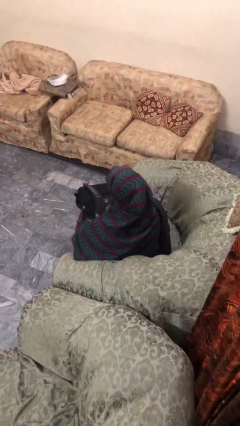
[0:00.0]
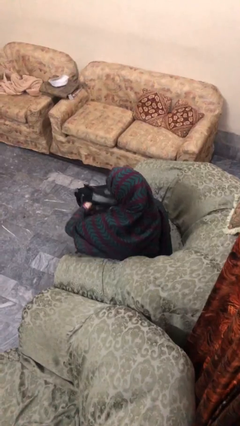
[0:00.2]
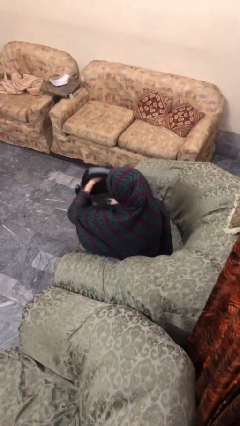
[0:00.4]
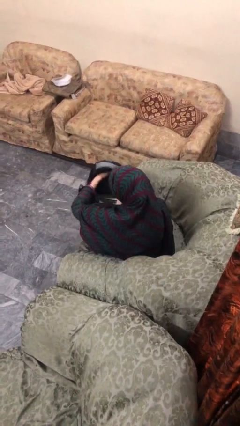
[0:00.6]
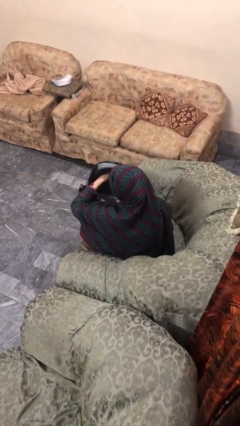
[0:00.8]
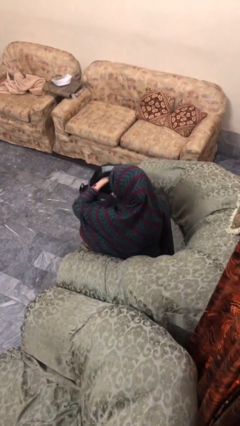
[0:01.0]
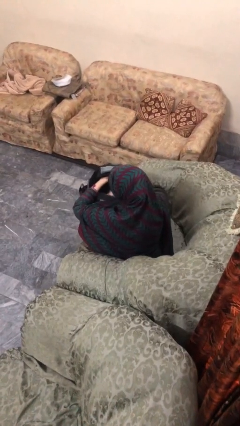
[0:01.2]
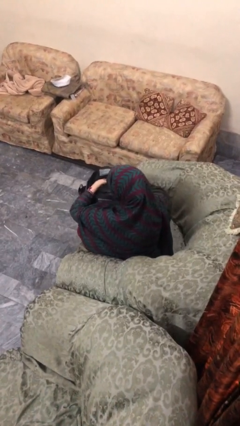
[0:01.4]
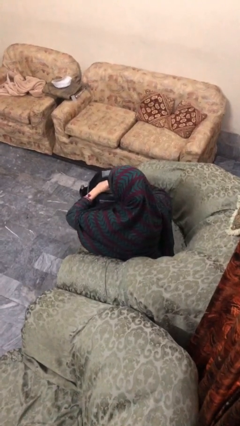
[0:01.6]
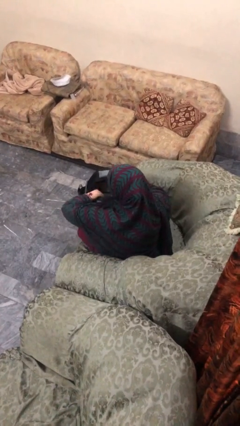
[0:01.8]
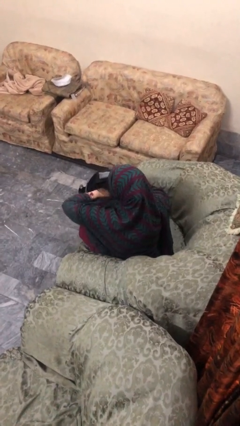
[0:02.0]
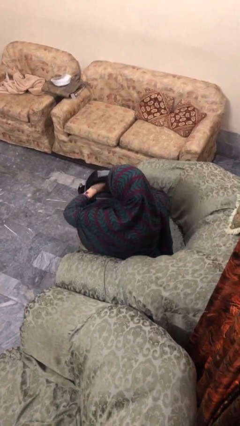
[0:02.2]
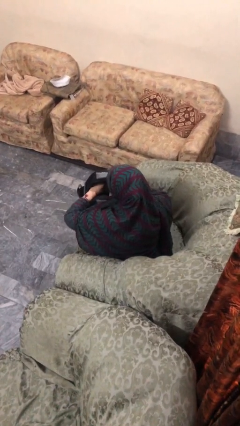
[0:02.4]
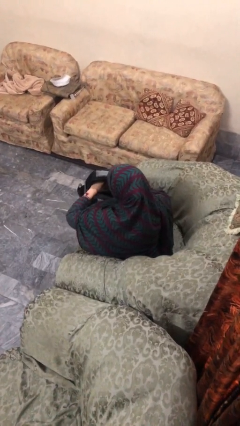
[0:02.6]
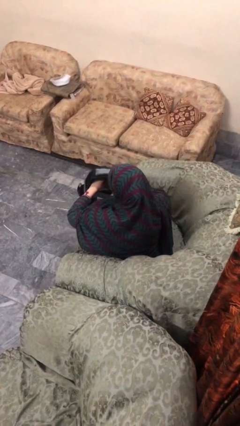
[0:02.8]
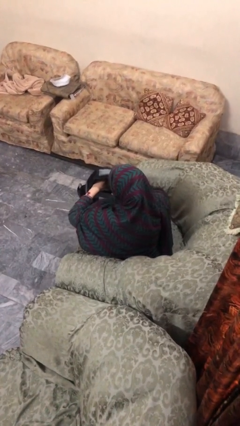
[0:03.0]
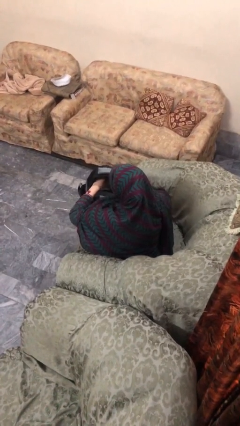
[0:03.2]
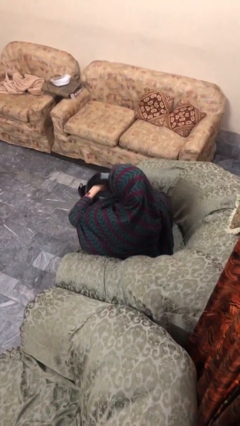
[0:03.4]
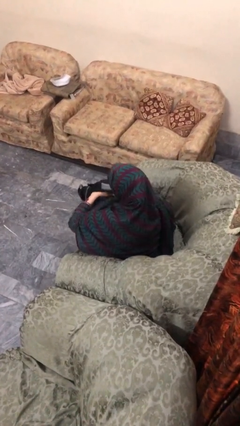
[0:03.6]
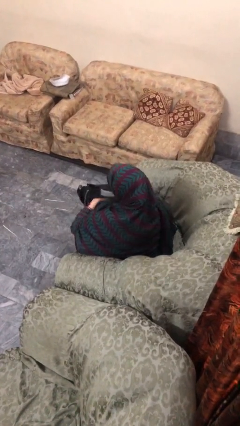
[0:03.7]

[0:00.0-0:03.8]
person searches in bag

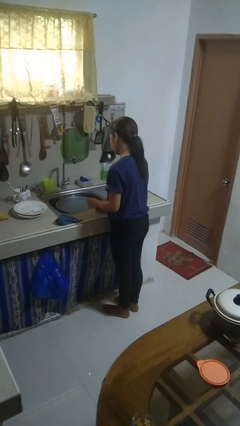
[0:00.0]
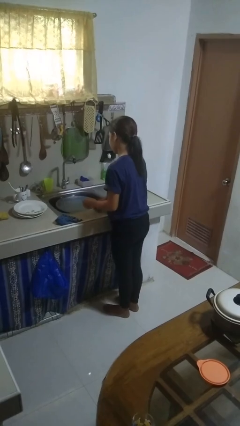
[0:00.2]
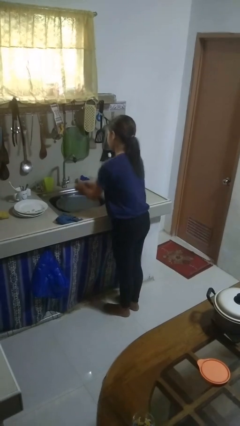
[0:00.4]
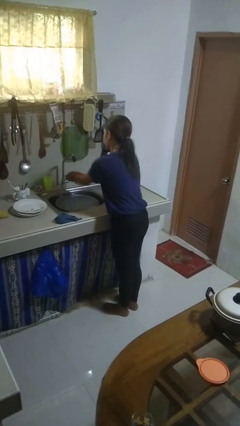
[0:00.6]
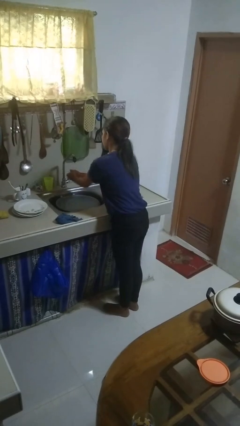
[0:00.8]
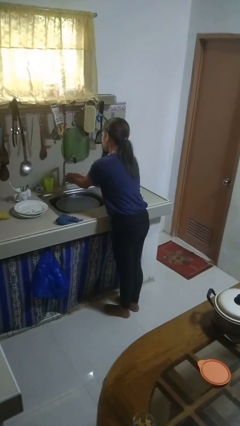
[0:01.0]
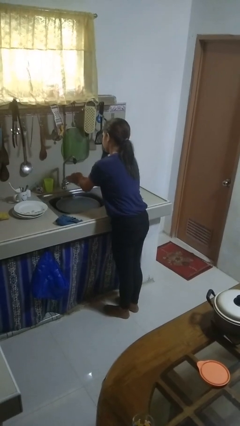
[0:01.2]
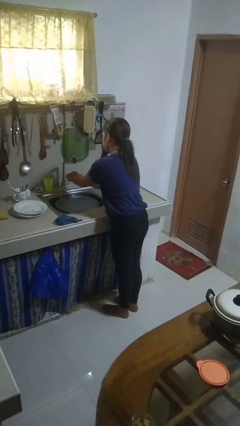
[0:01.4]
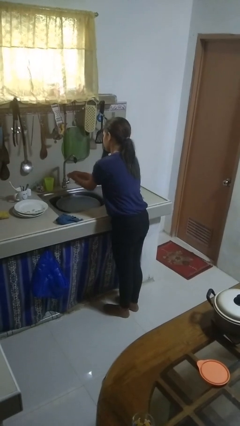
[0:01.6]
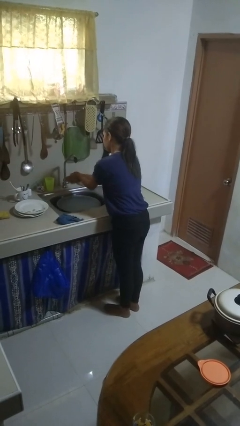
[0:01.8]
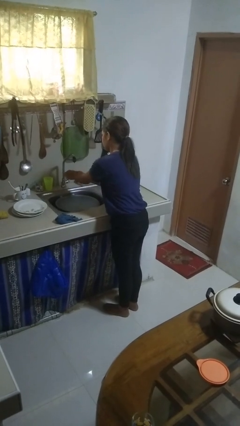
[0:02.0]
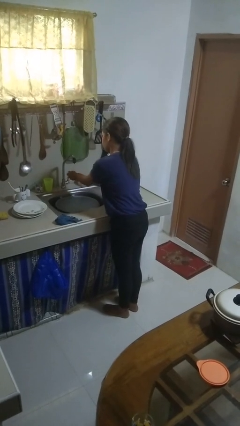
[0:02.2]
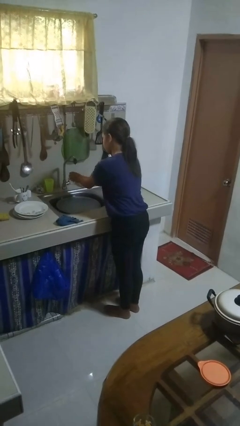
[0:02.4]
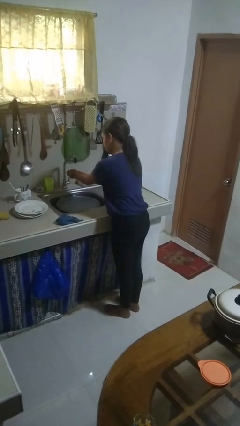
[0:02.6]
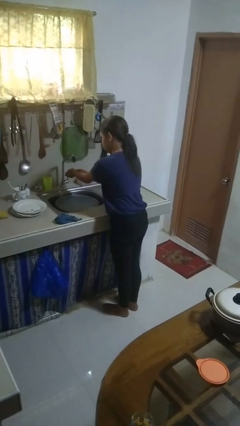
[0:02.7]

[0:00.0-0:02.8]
person washes hands

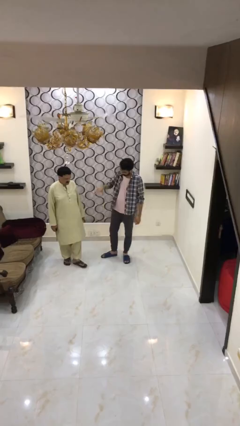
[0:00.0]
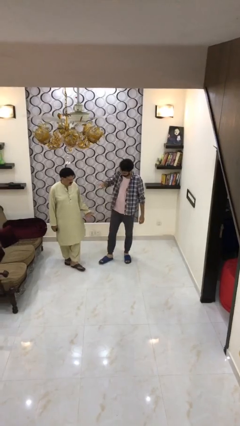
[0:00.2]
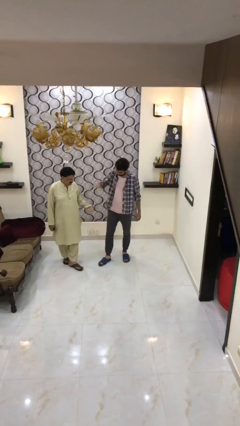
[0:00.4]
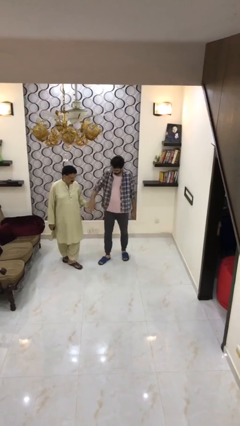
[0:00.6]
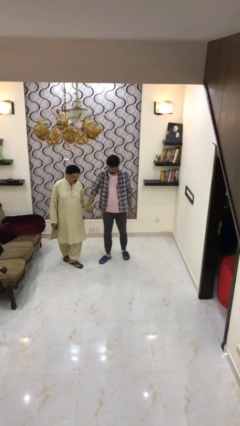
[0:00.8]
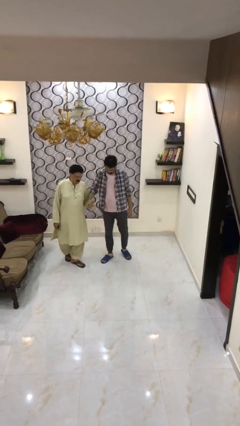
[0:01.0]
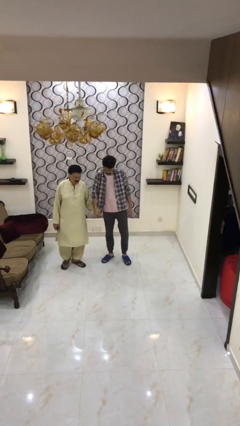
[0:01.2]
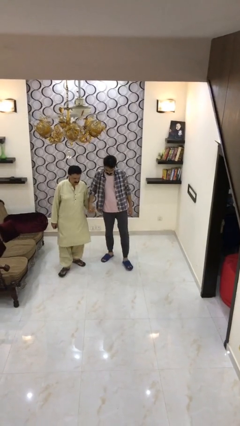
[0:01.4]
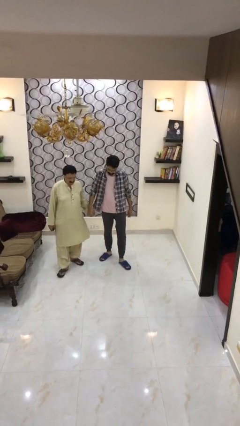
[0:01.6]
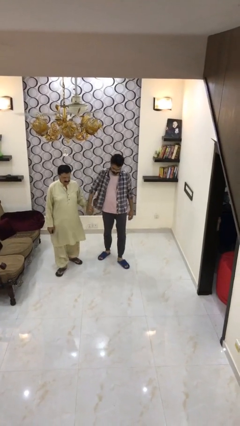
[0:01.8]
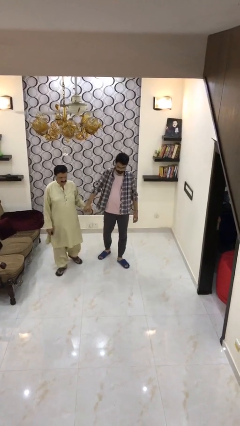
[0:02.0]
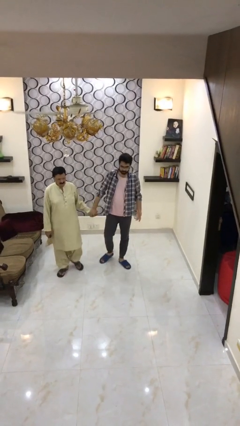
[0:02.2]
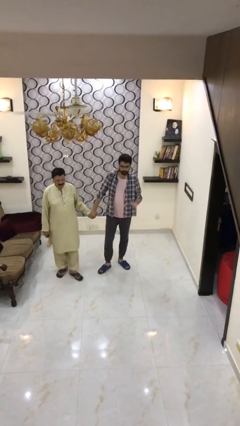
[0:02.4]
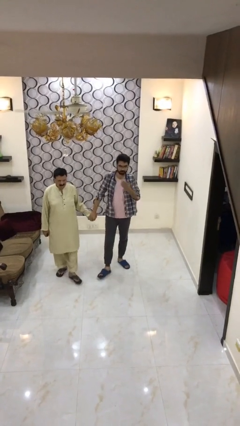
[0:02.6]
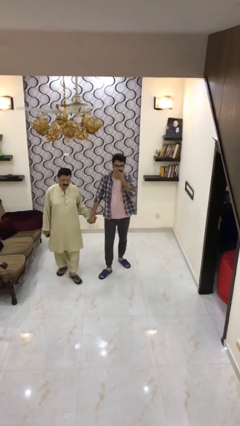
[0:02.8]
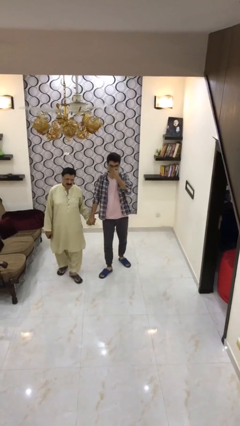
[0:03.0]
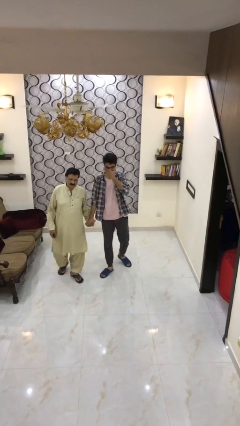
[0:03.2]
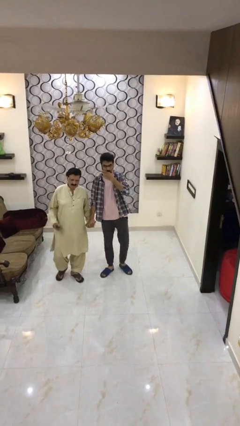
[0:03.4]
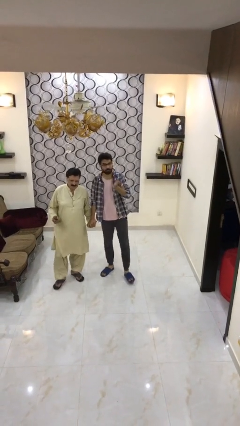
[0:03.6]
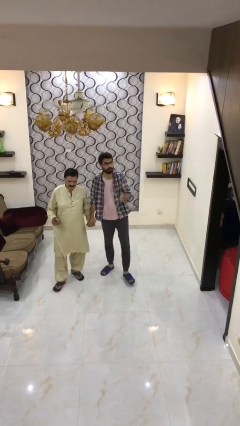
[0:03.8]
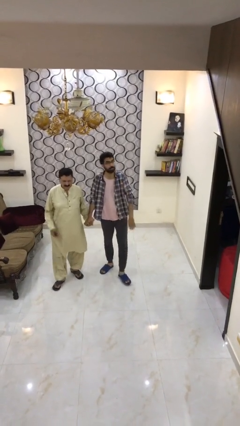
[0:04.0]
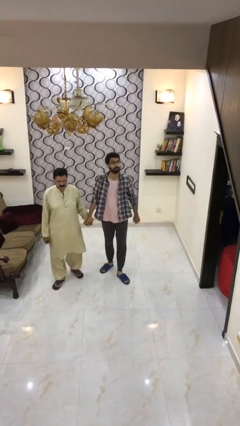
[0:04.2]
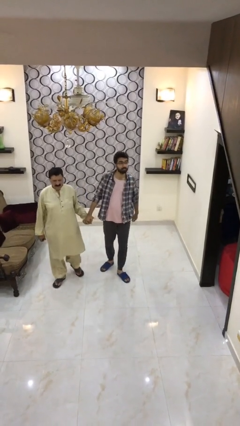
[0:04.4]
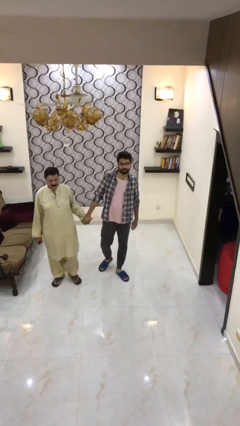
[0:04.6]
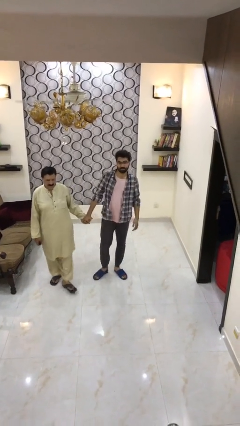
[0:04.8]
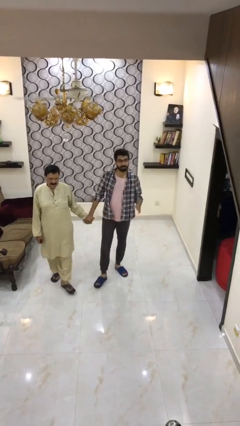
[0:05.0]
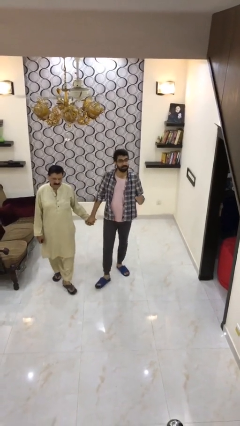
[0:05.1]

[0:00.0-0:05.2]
person holds hand

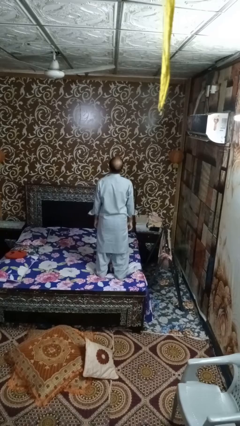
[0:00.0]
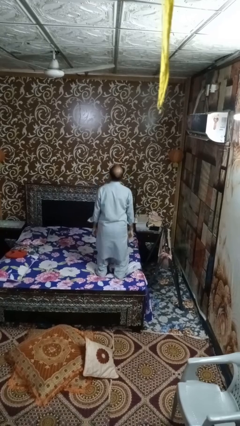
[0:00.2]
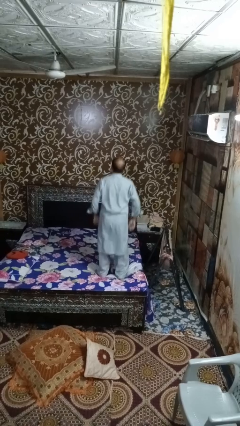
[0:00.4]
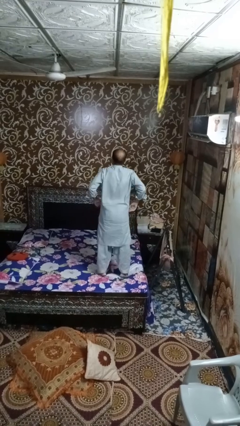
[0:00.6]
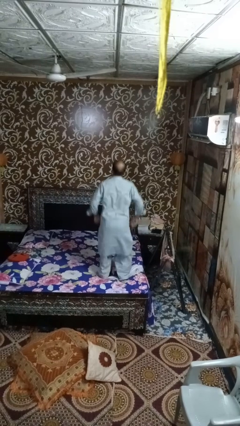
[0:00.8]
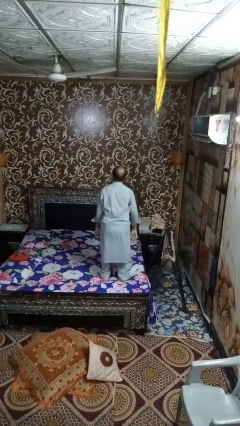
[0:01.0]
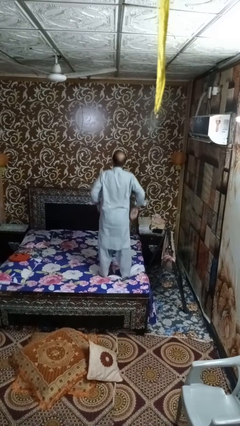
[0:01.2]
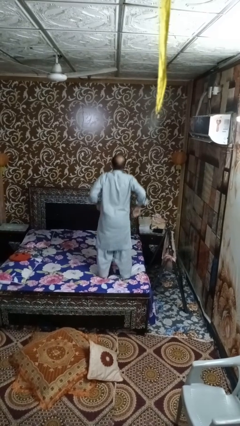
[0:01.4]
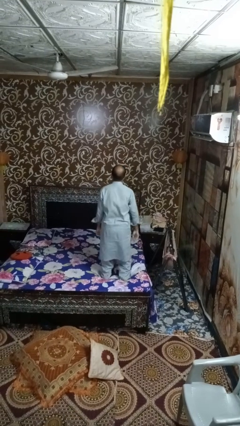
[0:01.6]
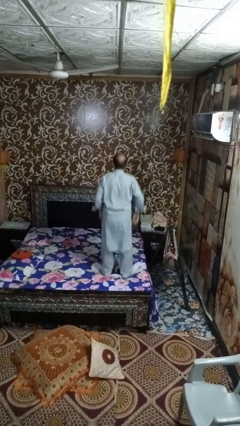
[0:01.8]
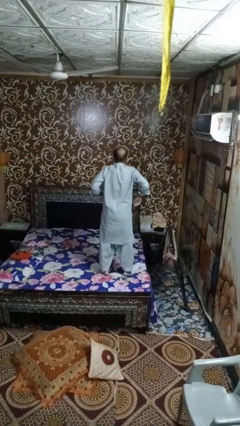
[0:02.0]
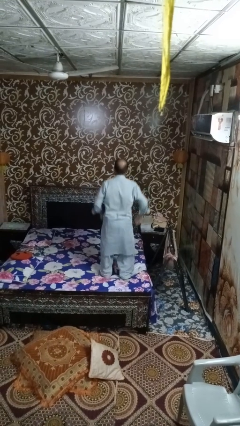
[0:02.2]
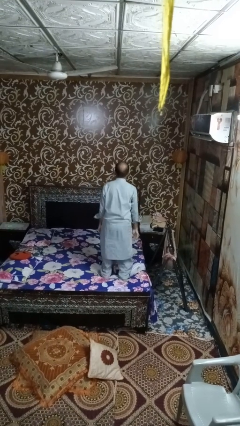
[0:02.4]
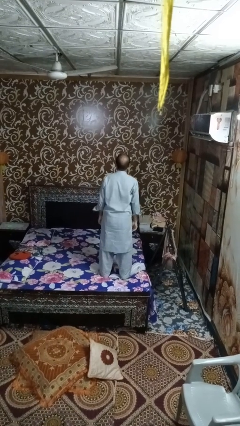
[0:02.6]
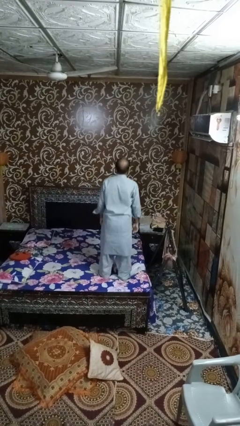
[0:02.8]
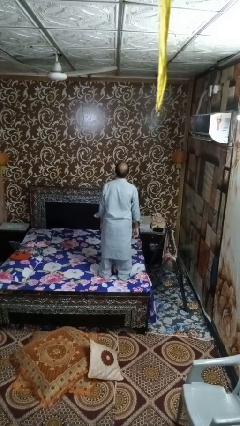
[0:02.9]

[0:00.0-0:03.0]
person jumps on bed

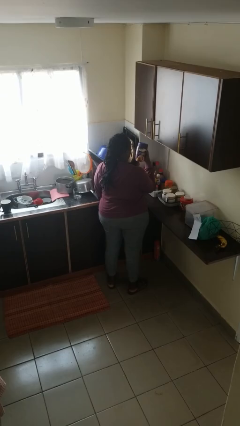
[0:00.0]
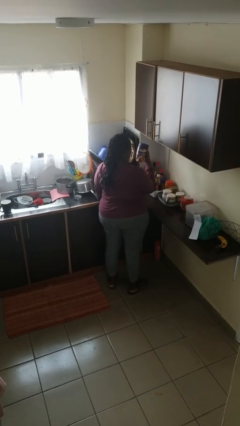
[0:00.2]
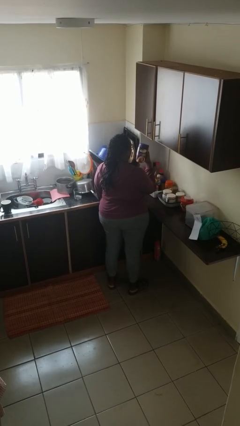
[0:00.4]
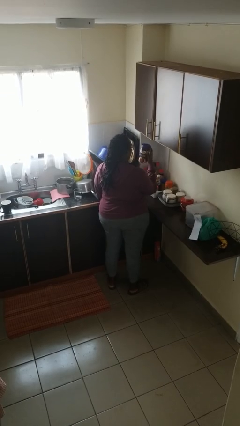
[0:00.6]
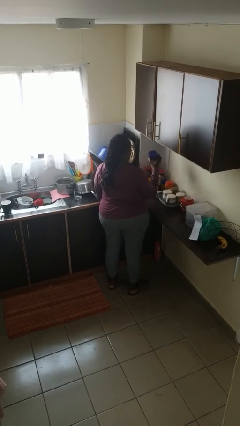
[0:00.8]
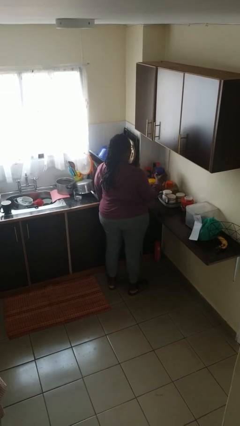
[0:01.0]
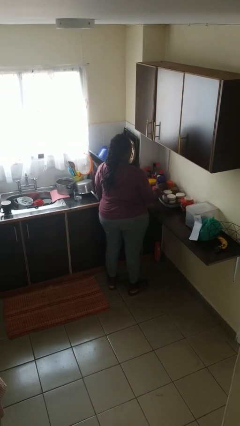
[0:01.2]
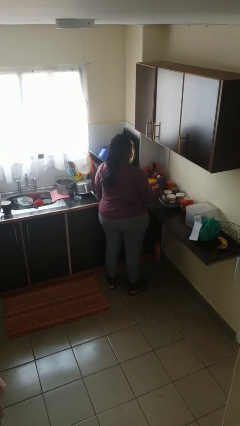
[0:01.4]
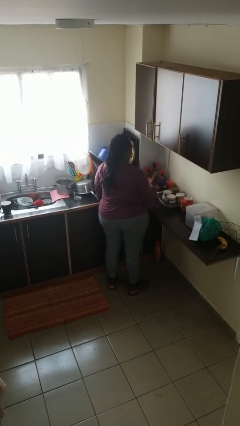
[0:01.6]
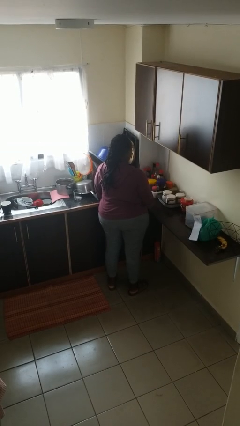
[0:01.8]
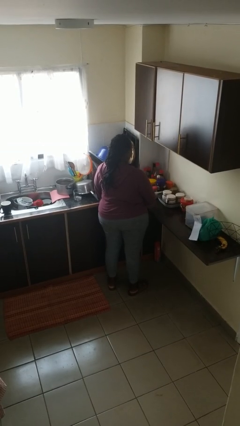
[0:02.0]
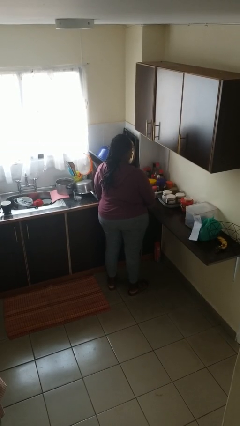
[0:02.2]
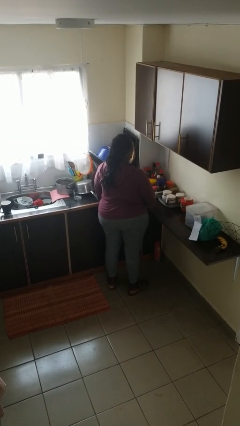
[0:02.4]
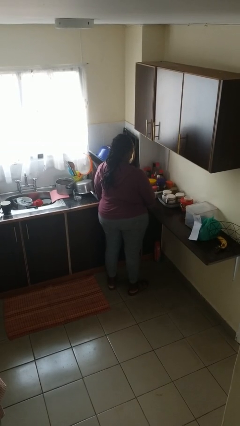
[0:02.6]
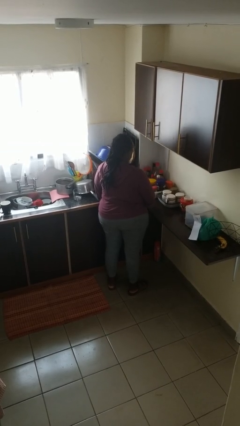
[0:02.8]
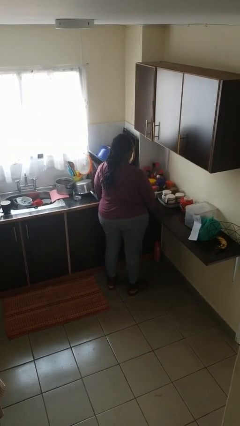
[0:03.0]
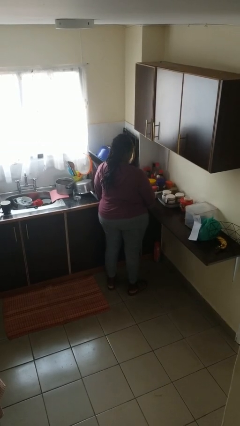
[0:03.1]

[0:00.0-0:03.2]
person puts down object on countertop
